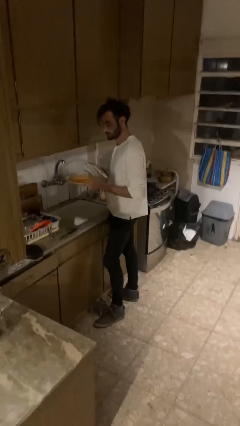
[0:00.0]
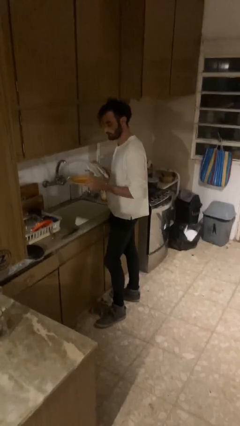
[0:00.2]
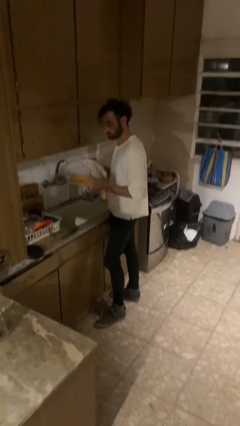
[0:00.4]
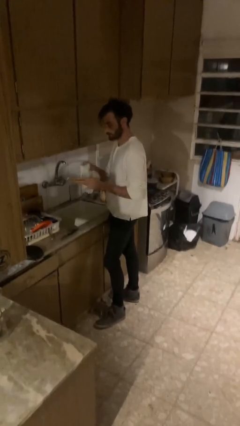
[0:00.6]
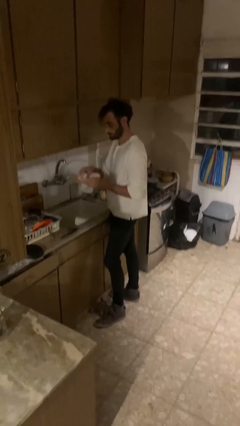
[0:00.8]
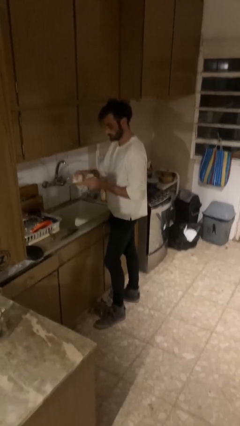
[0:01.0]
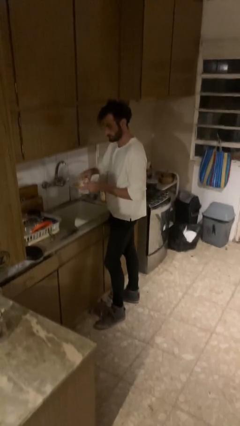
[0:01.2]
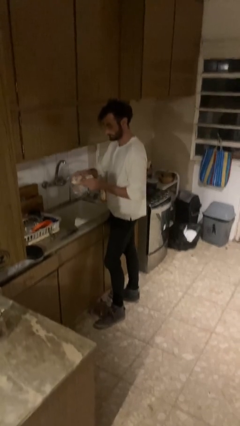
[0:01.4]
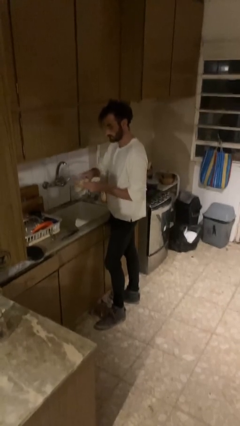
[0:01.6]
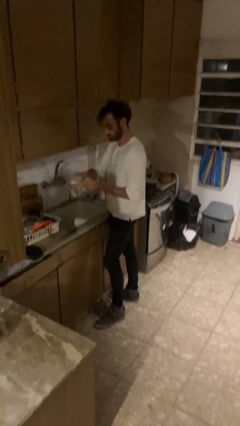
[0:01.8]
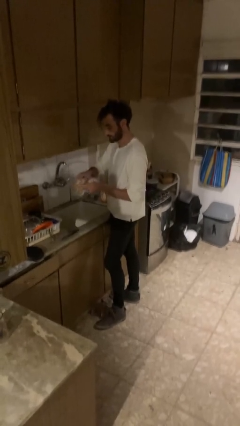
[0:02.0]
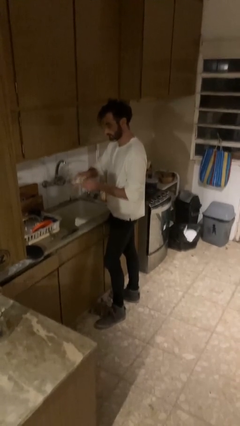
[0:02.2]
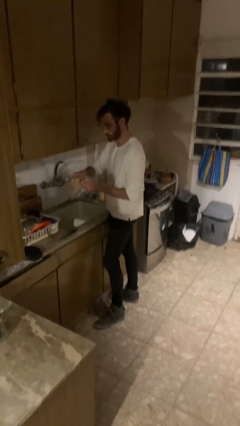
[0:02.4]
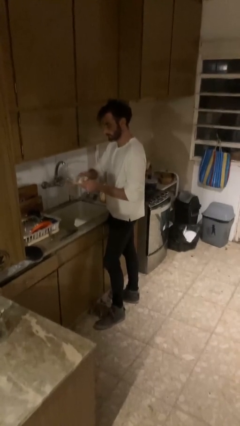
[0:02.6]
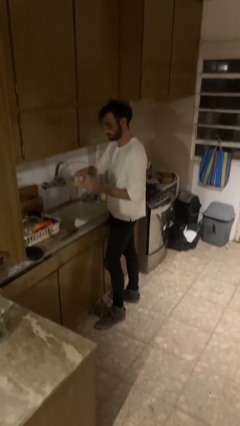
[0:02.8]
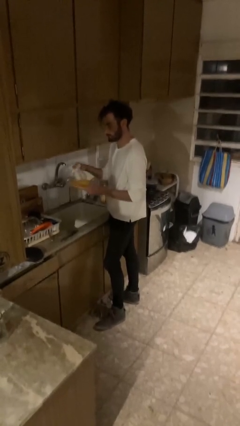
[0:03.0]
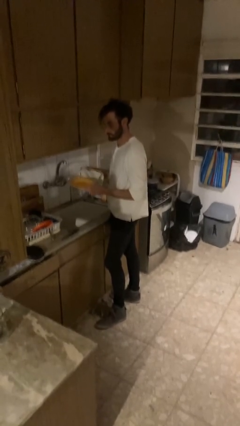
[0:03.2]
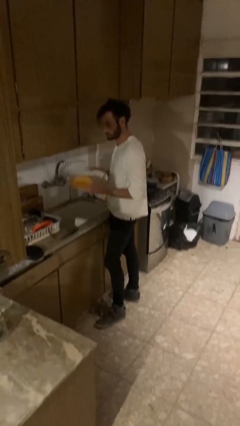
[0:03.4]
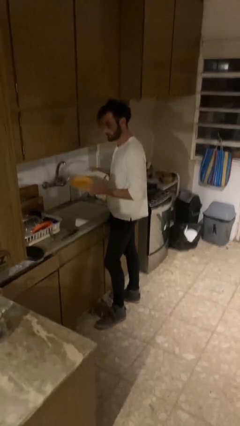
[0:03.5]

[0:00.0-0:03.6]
person dries dish

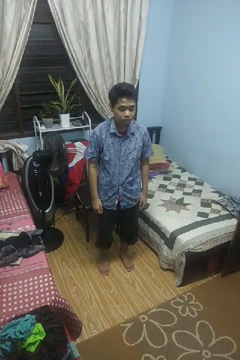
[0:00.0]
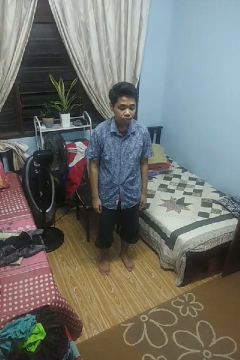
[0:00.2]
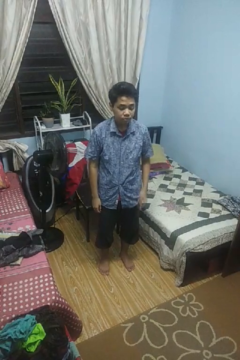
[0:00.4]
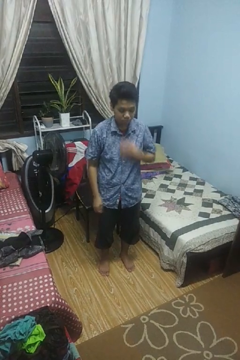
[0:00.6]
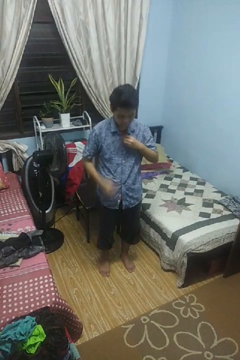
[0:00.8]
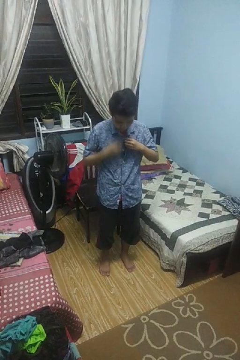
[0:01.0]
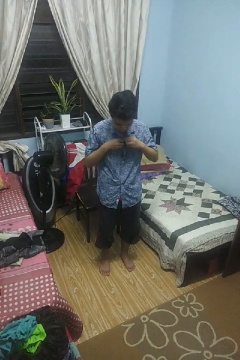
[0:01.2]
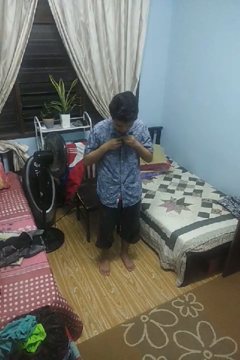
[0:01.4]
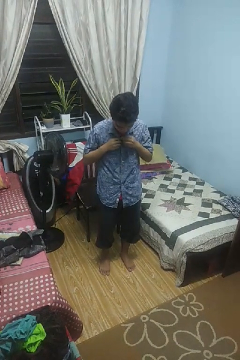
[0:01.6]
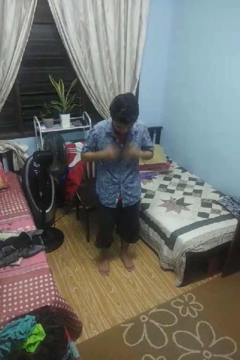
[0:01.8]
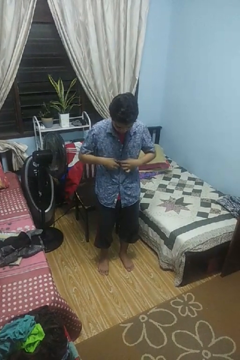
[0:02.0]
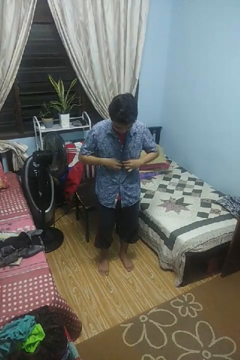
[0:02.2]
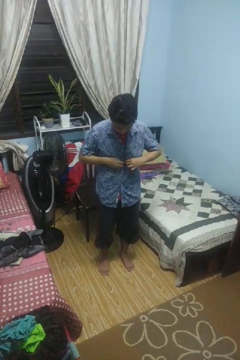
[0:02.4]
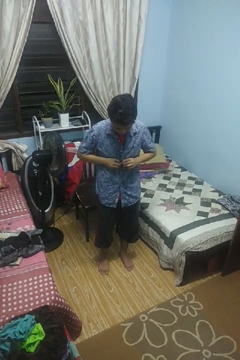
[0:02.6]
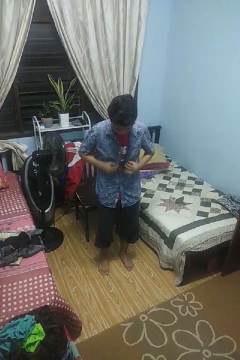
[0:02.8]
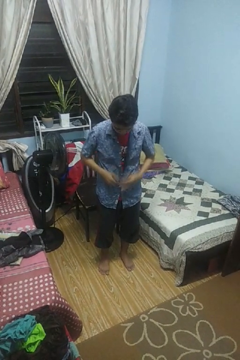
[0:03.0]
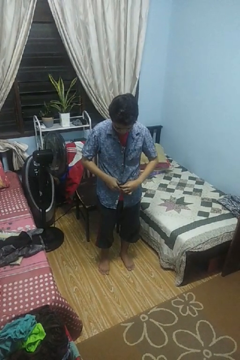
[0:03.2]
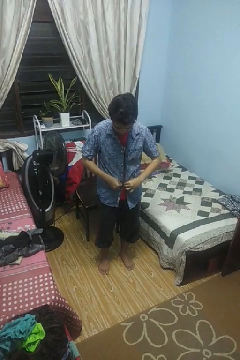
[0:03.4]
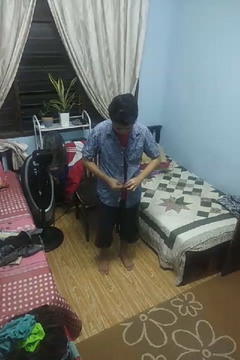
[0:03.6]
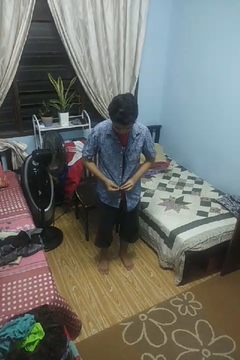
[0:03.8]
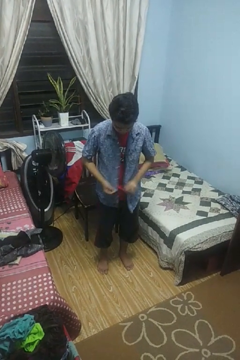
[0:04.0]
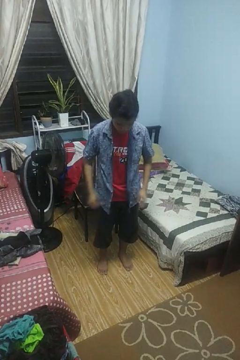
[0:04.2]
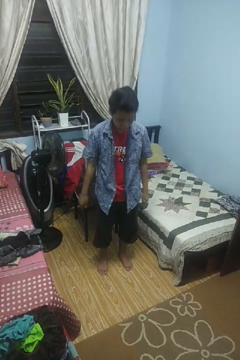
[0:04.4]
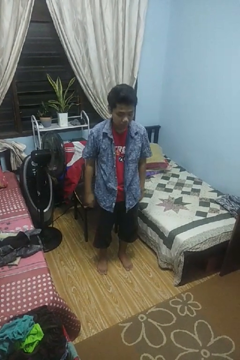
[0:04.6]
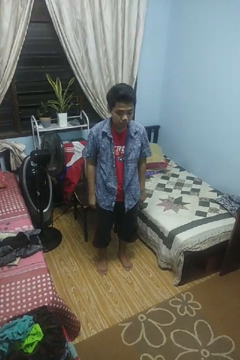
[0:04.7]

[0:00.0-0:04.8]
person unbuttons shirt

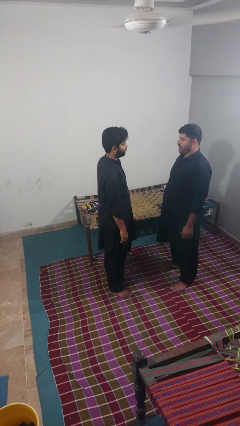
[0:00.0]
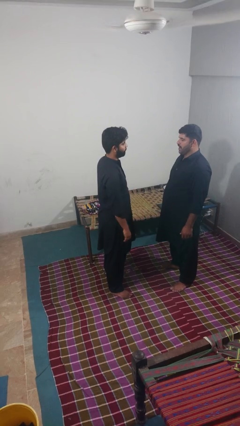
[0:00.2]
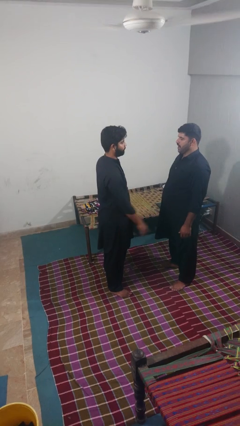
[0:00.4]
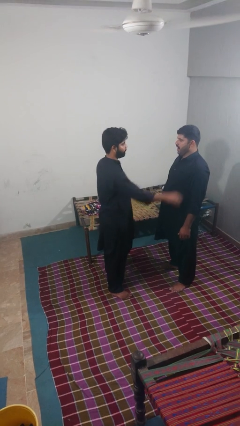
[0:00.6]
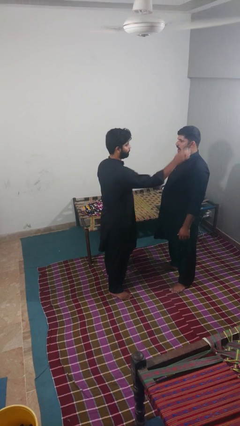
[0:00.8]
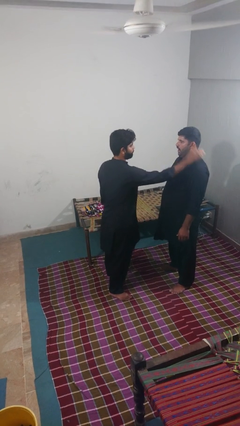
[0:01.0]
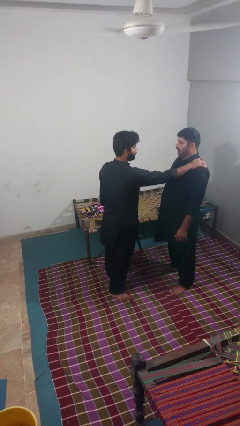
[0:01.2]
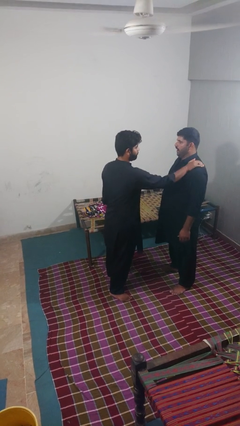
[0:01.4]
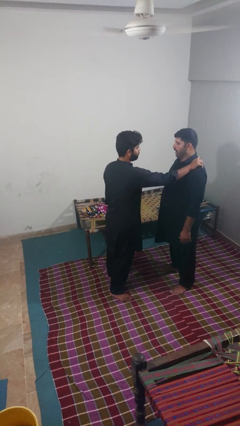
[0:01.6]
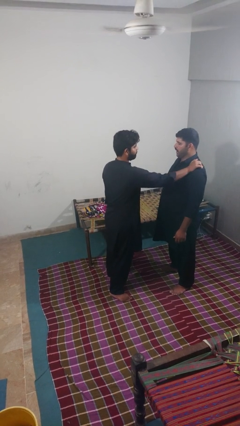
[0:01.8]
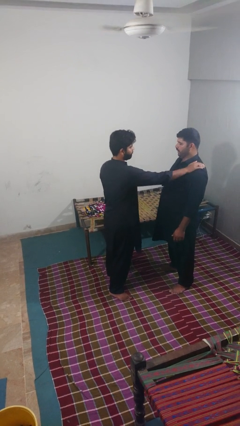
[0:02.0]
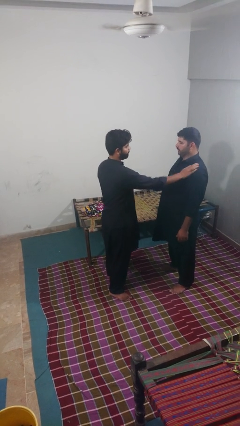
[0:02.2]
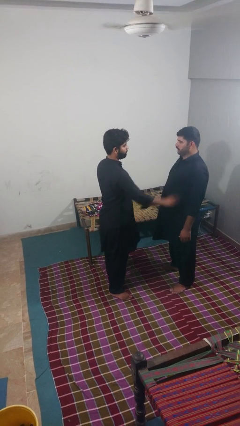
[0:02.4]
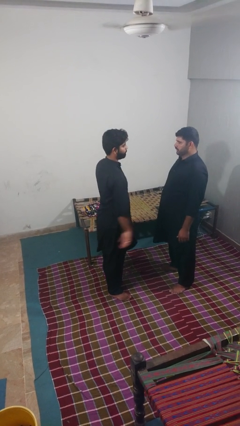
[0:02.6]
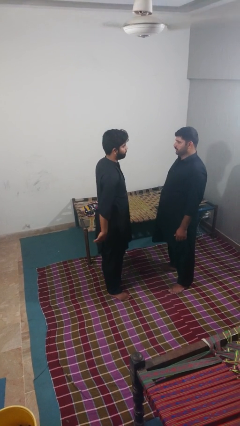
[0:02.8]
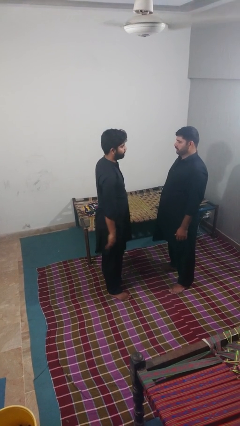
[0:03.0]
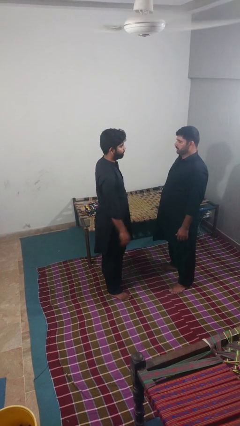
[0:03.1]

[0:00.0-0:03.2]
person pounds shoulders of person

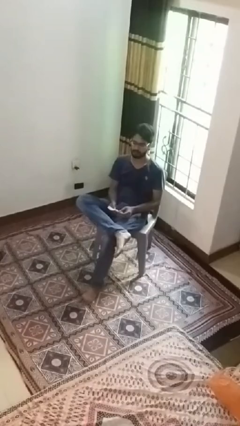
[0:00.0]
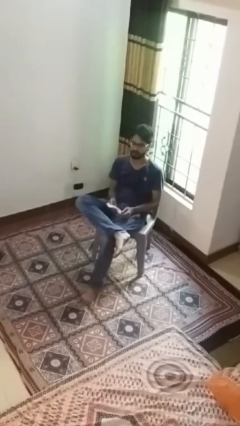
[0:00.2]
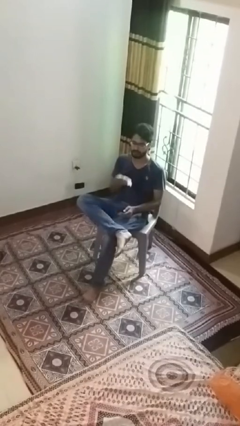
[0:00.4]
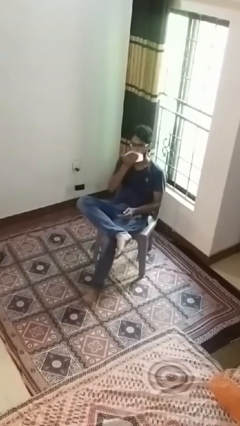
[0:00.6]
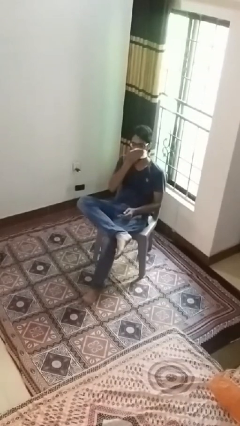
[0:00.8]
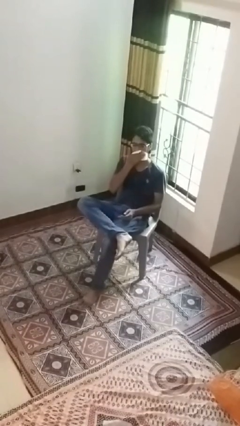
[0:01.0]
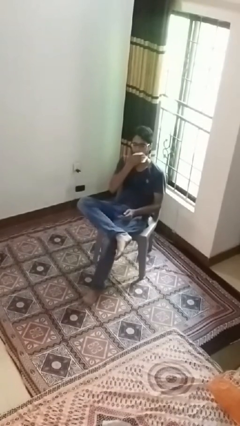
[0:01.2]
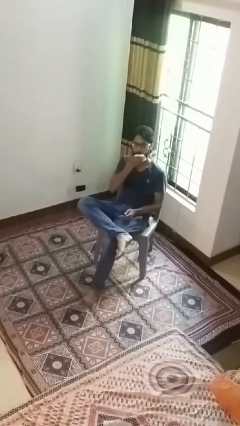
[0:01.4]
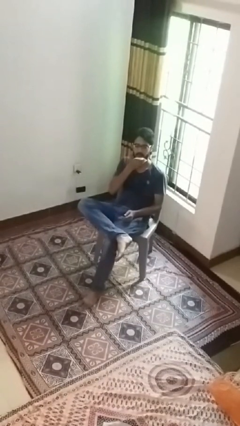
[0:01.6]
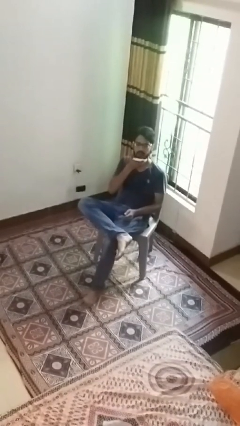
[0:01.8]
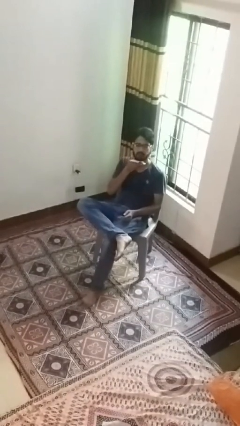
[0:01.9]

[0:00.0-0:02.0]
person wipes mouth with napkin

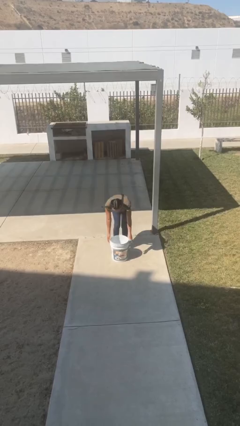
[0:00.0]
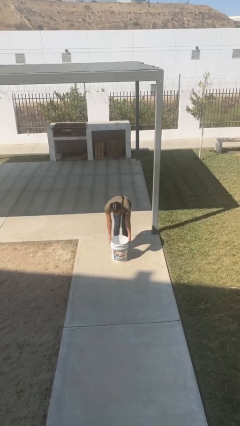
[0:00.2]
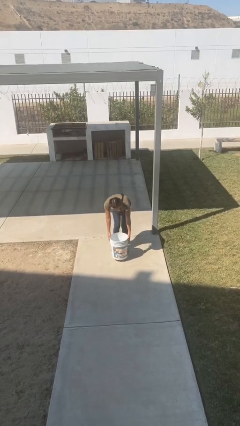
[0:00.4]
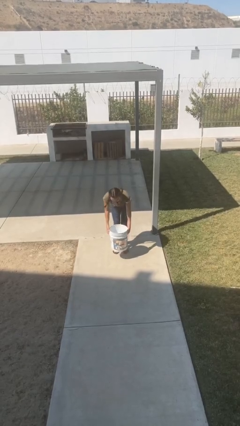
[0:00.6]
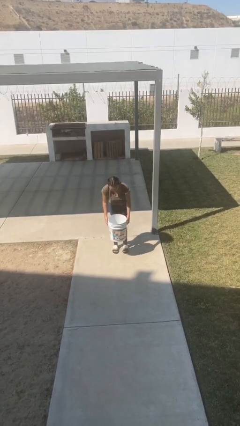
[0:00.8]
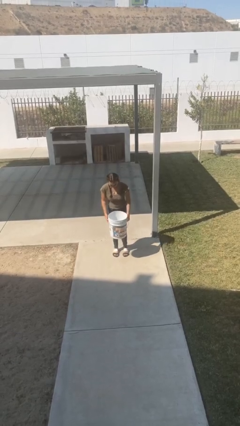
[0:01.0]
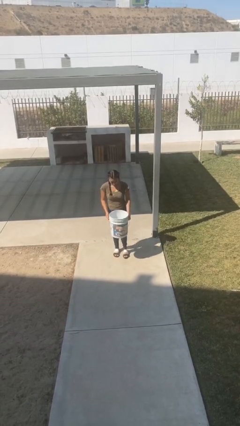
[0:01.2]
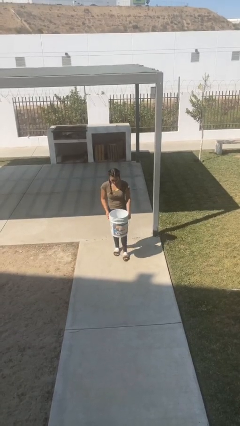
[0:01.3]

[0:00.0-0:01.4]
person picks up object from floor

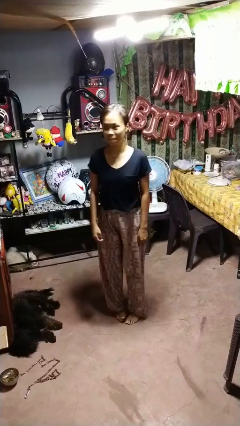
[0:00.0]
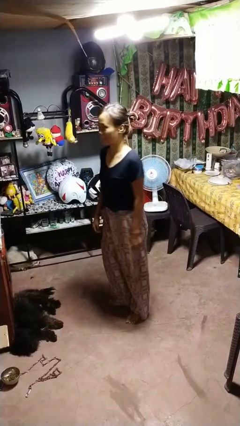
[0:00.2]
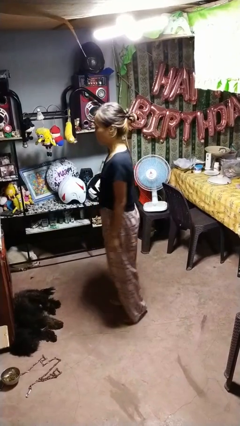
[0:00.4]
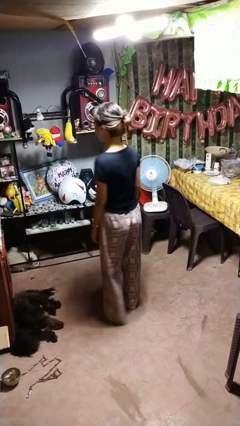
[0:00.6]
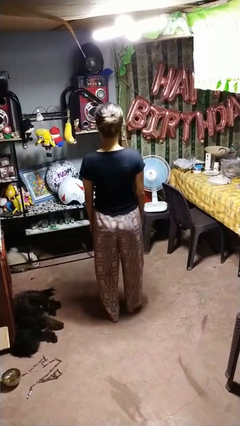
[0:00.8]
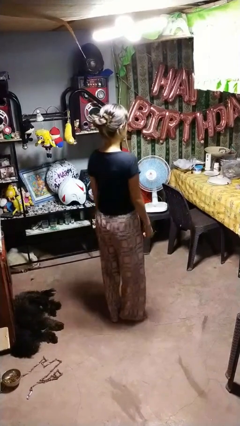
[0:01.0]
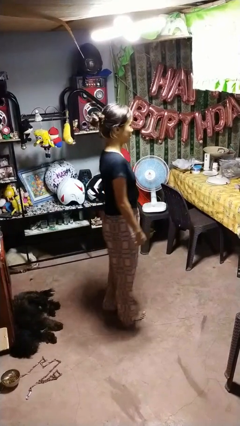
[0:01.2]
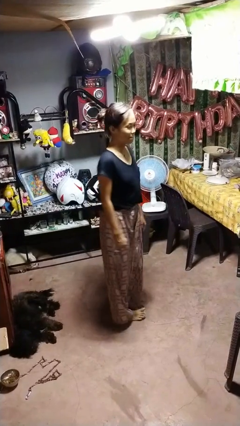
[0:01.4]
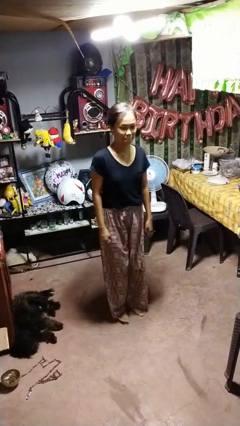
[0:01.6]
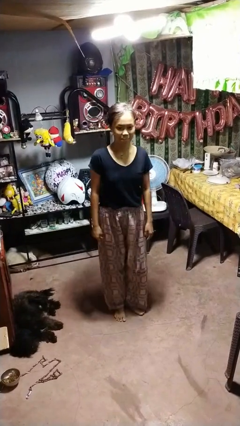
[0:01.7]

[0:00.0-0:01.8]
person twirls

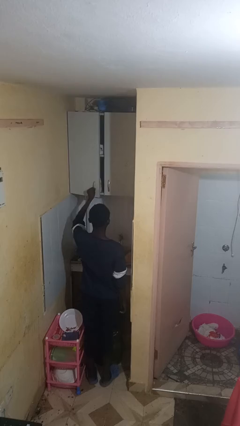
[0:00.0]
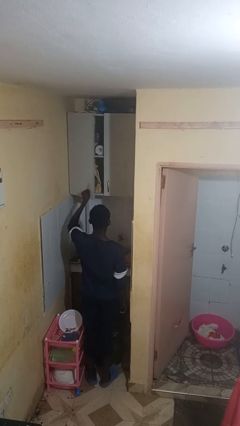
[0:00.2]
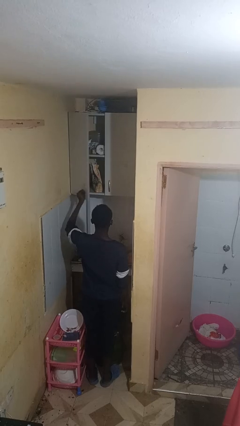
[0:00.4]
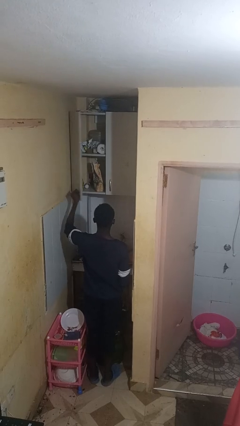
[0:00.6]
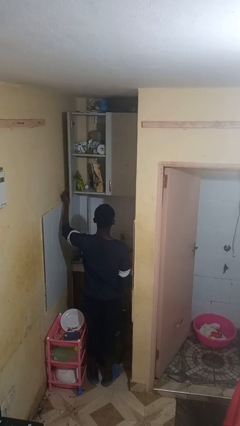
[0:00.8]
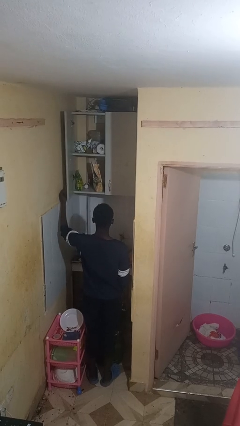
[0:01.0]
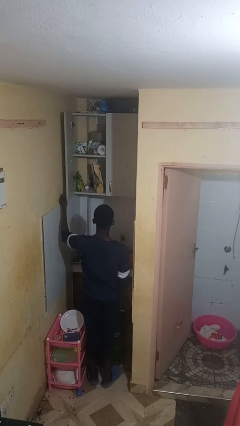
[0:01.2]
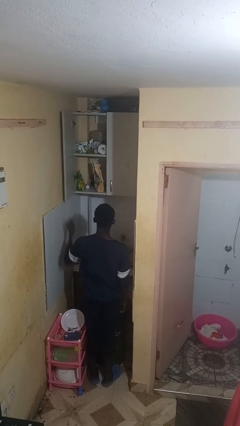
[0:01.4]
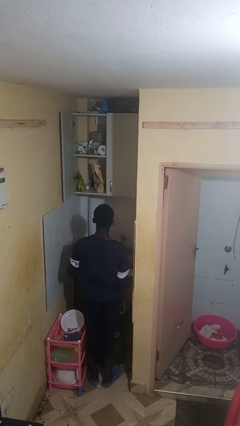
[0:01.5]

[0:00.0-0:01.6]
person opens cabinet
